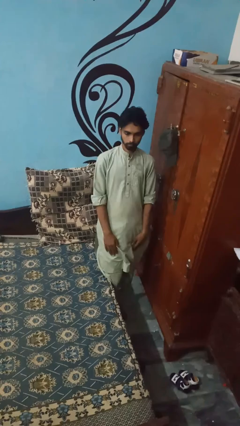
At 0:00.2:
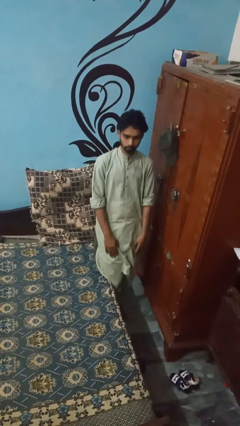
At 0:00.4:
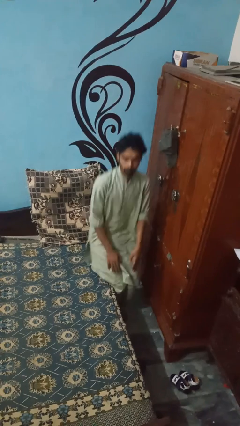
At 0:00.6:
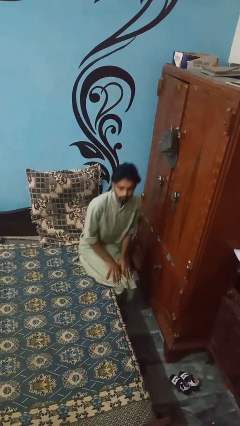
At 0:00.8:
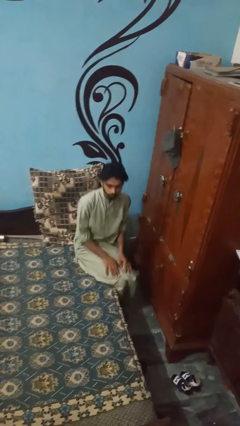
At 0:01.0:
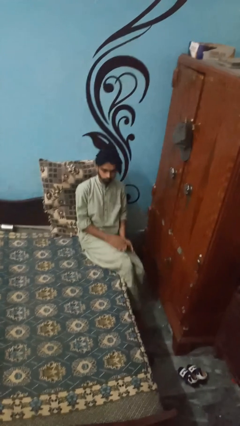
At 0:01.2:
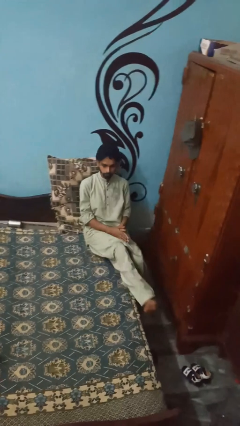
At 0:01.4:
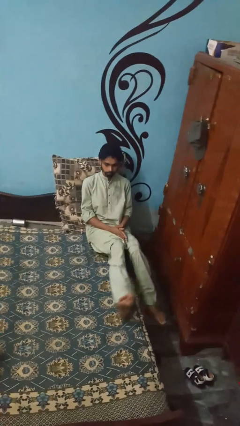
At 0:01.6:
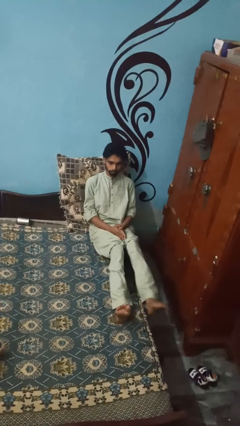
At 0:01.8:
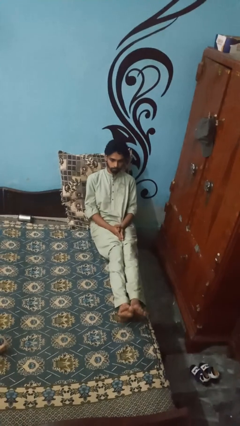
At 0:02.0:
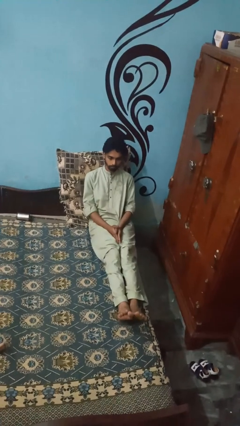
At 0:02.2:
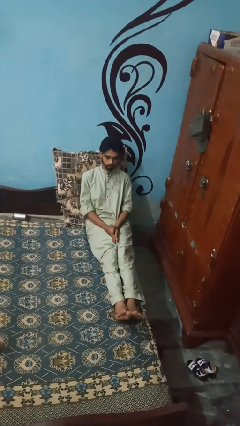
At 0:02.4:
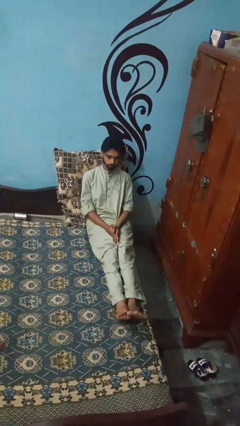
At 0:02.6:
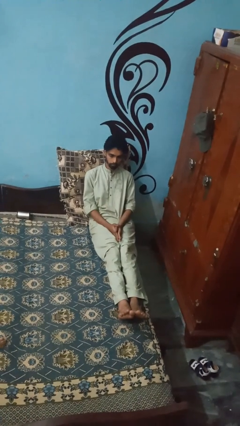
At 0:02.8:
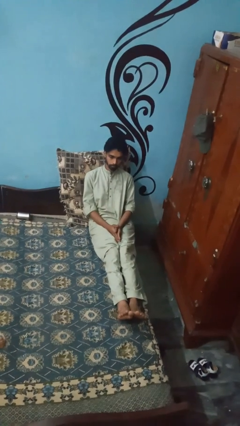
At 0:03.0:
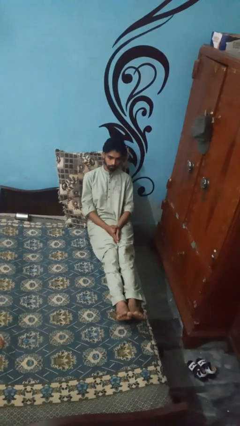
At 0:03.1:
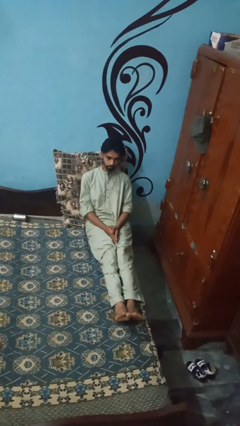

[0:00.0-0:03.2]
person lies down on bed

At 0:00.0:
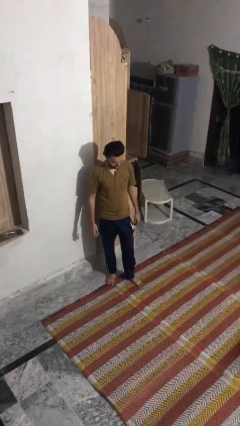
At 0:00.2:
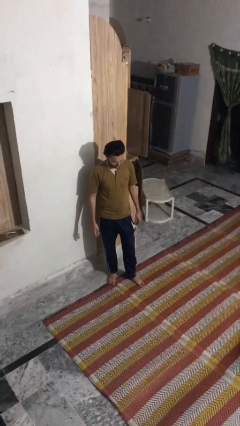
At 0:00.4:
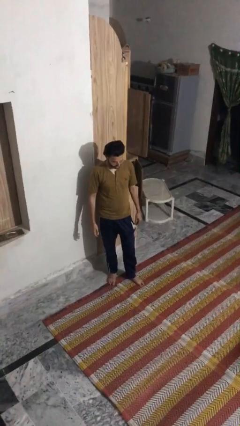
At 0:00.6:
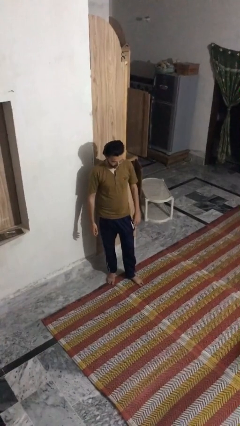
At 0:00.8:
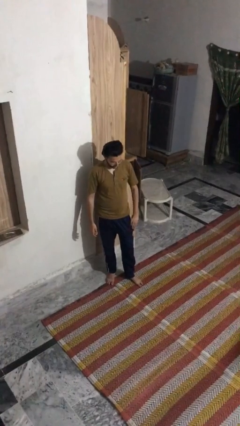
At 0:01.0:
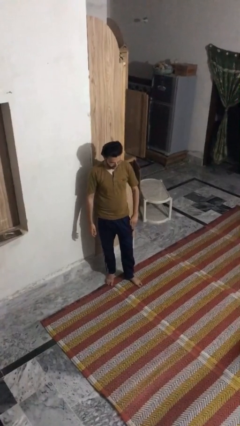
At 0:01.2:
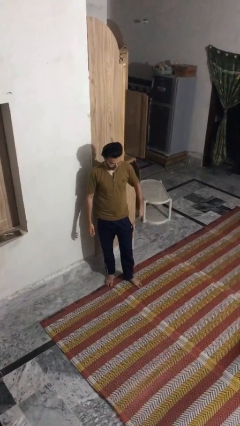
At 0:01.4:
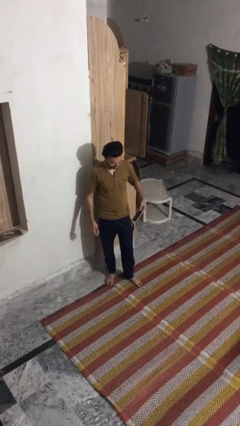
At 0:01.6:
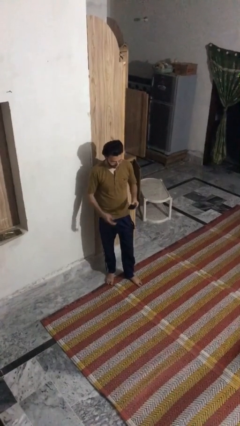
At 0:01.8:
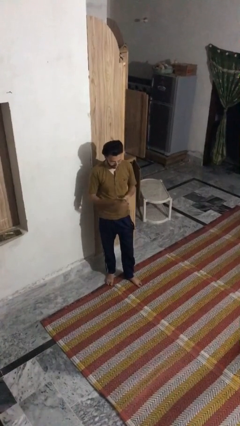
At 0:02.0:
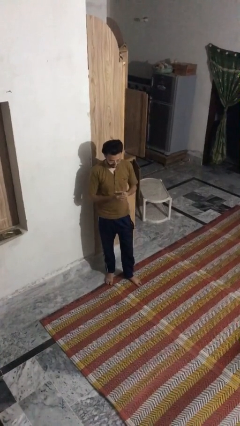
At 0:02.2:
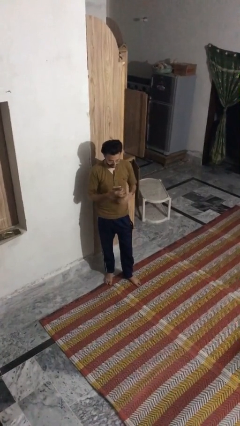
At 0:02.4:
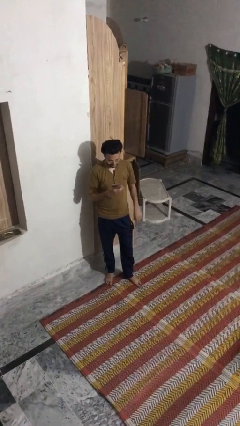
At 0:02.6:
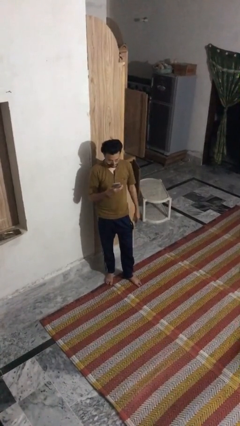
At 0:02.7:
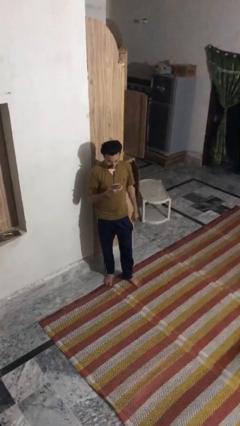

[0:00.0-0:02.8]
person takes phone from pocket

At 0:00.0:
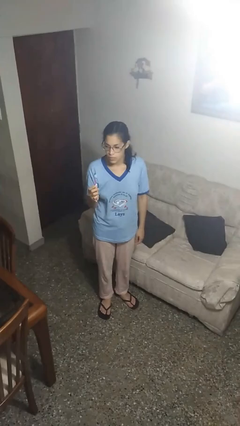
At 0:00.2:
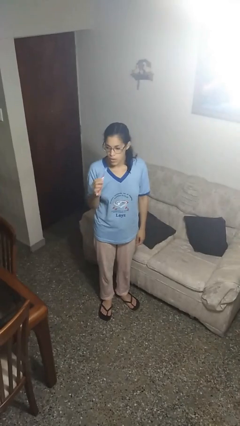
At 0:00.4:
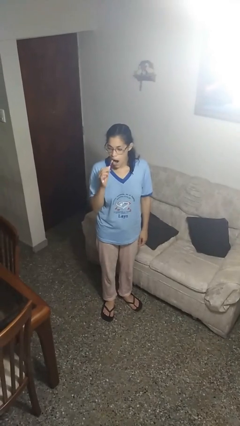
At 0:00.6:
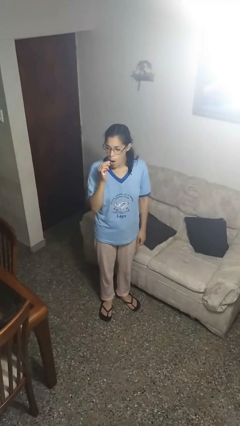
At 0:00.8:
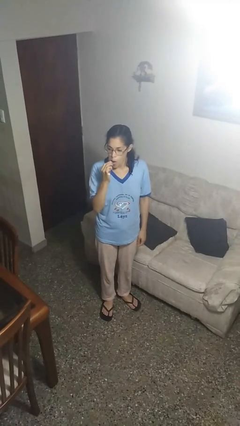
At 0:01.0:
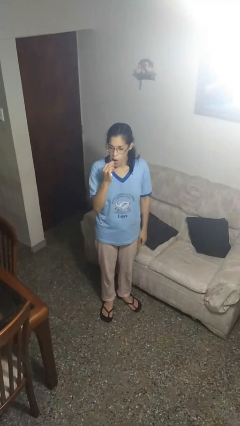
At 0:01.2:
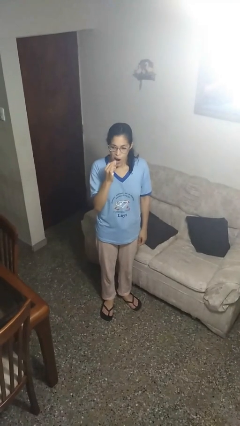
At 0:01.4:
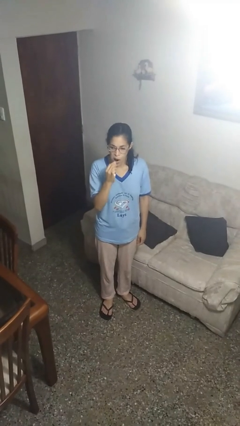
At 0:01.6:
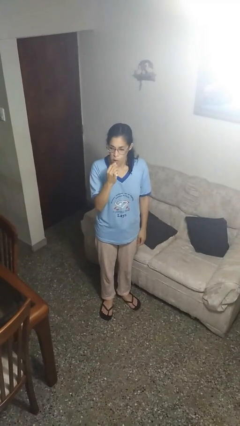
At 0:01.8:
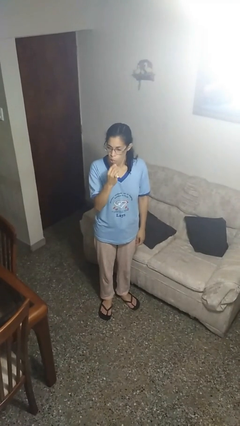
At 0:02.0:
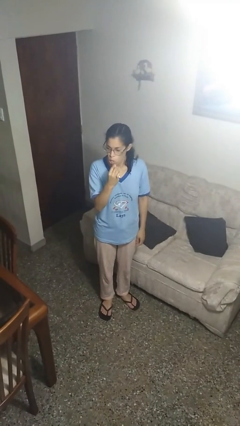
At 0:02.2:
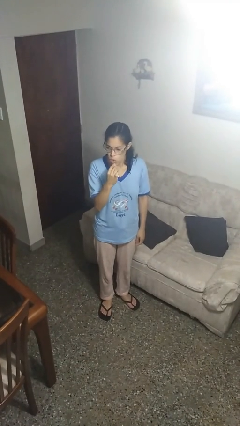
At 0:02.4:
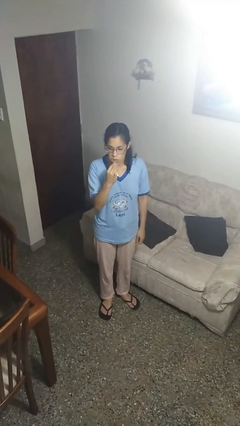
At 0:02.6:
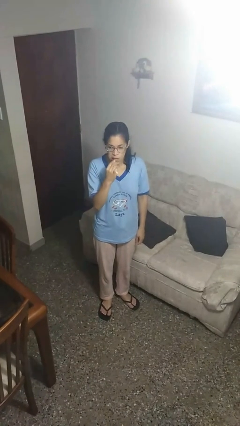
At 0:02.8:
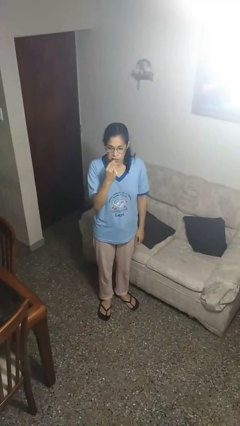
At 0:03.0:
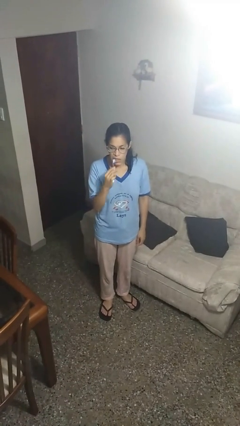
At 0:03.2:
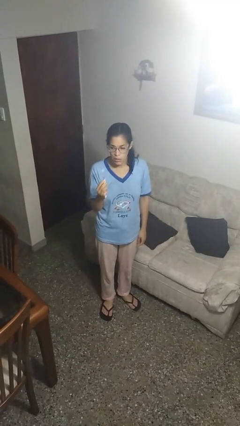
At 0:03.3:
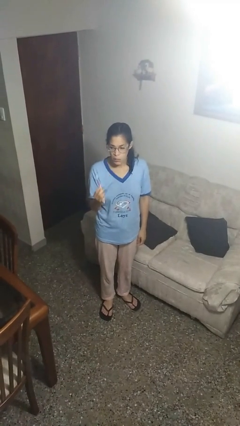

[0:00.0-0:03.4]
person brushes teeth

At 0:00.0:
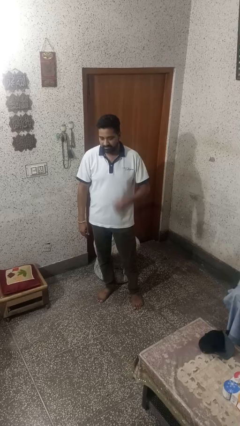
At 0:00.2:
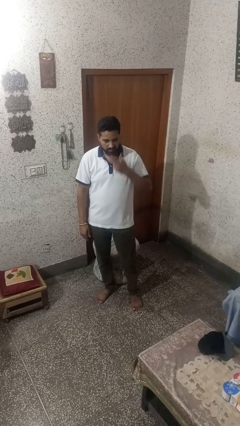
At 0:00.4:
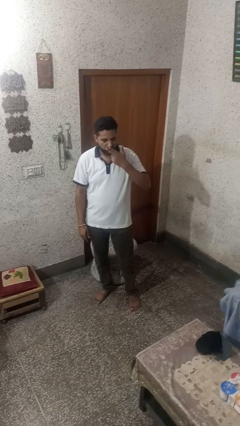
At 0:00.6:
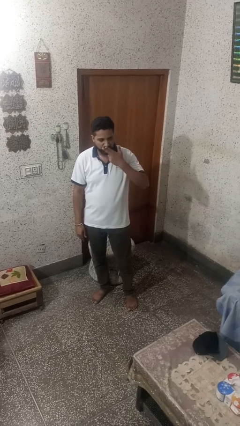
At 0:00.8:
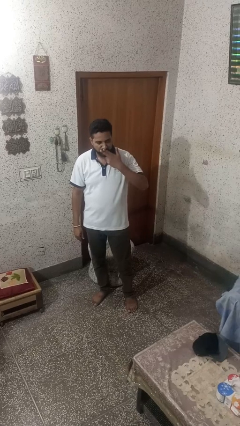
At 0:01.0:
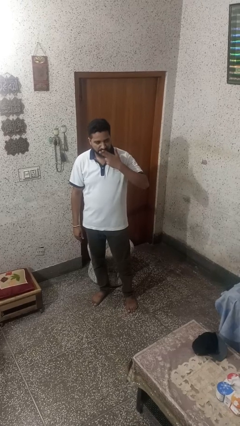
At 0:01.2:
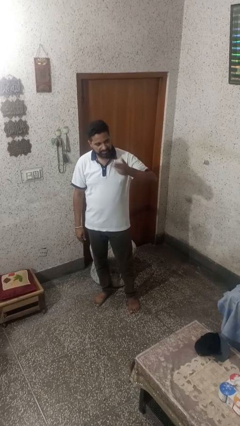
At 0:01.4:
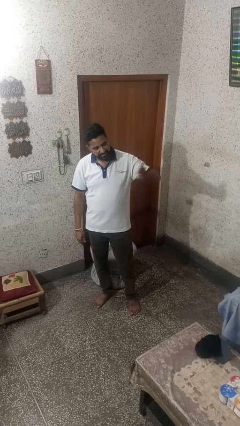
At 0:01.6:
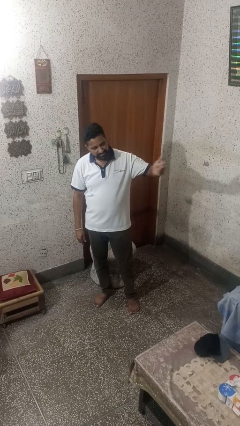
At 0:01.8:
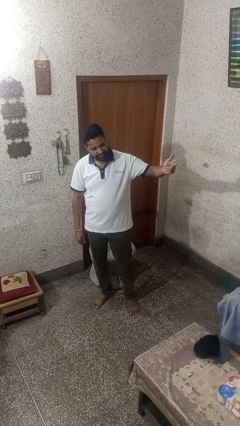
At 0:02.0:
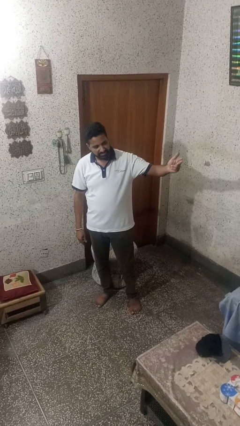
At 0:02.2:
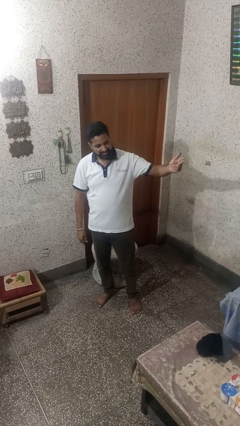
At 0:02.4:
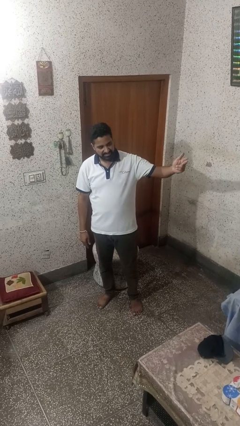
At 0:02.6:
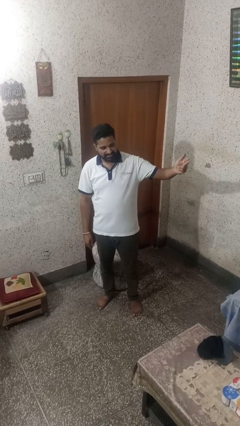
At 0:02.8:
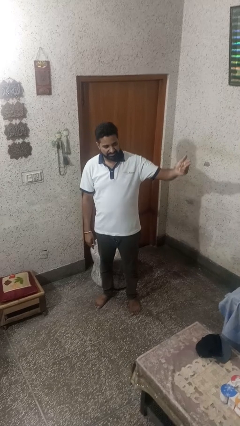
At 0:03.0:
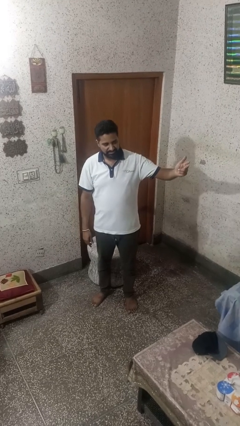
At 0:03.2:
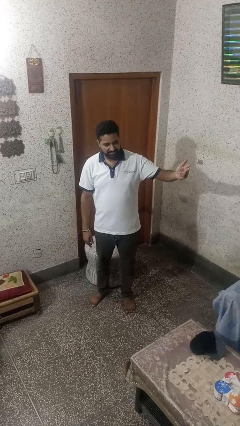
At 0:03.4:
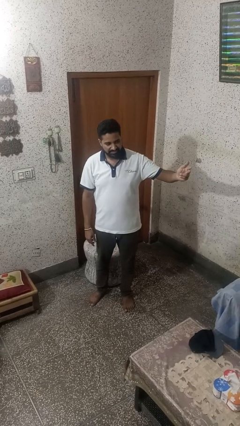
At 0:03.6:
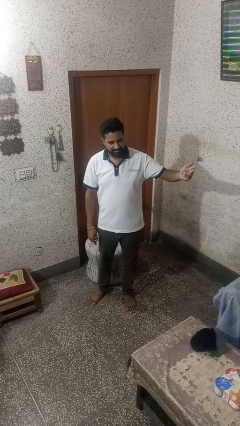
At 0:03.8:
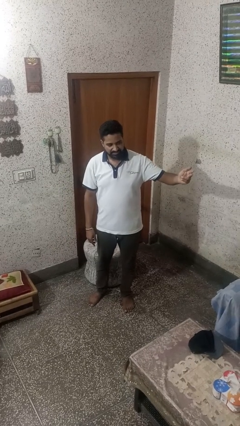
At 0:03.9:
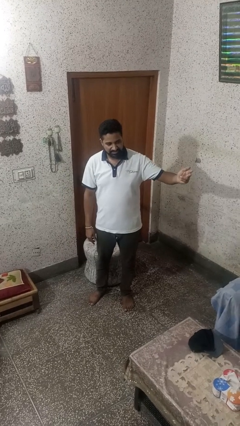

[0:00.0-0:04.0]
person gestures blow kiss

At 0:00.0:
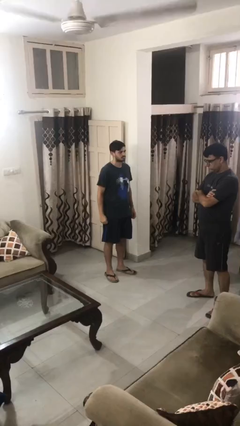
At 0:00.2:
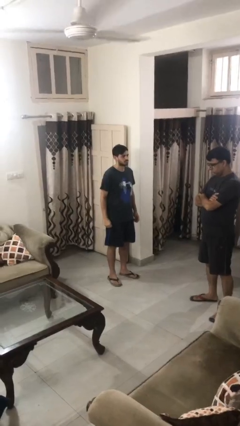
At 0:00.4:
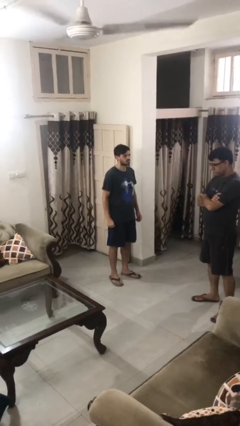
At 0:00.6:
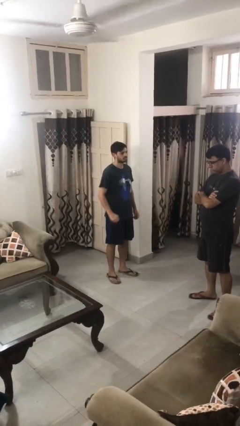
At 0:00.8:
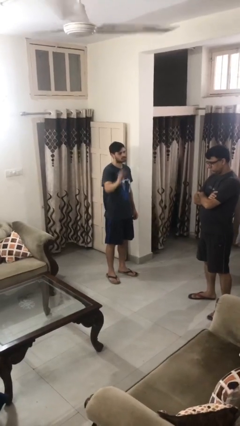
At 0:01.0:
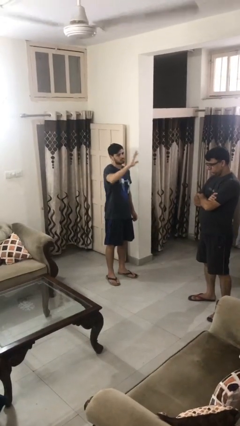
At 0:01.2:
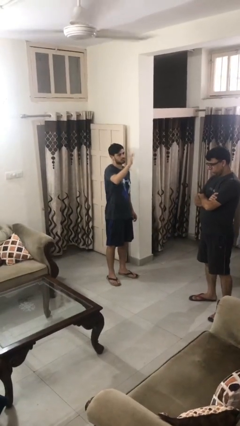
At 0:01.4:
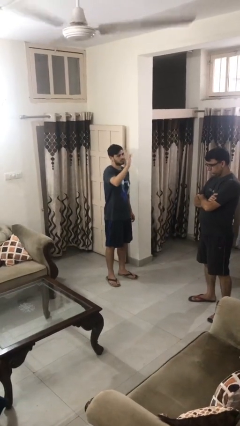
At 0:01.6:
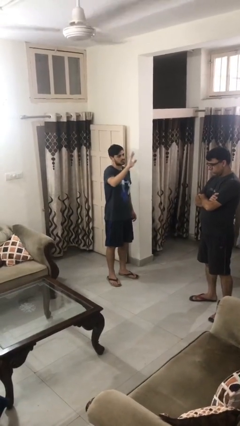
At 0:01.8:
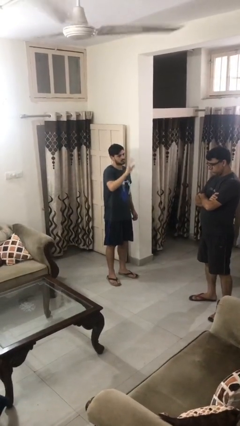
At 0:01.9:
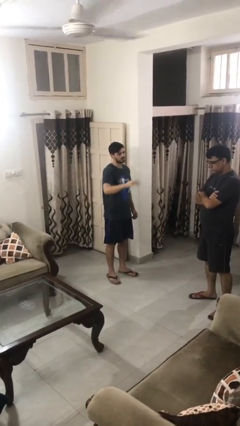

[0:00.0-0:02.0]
person waves at person

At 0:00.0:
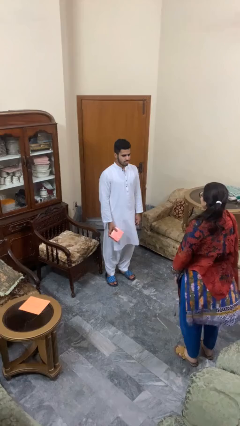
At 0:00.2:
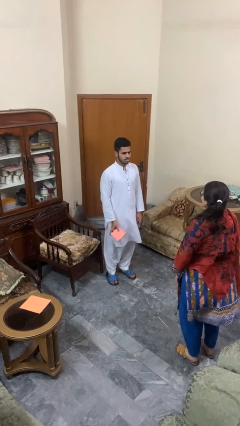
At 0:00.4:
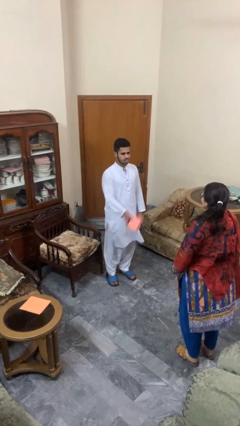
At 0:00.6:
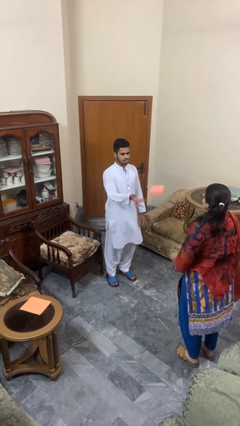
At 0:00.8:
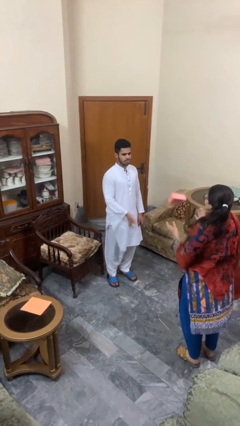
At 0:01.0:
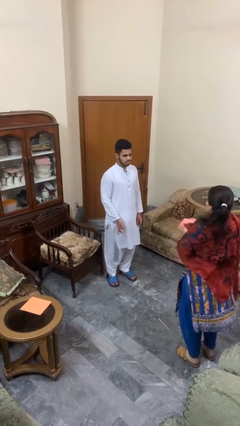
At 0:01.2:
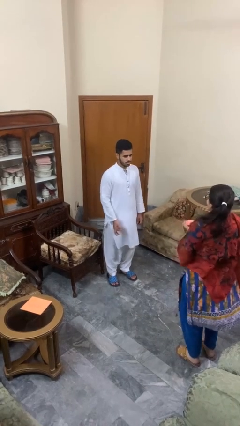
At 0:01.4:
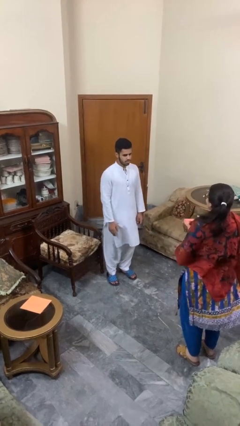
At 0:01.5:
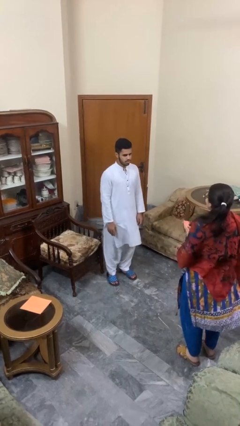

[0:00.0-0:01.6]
person throws object to person

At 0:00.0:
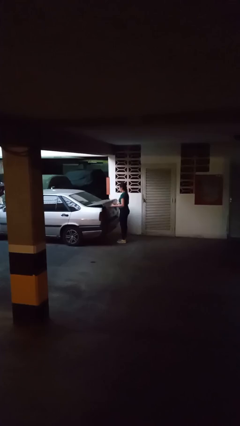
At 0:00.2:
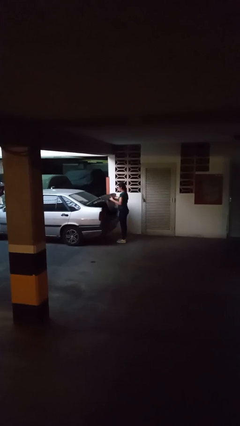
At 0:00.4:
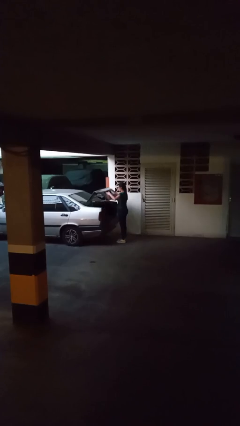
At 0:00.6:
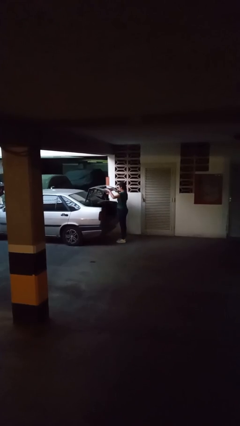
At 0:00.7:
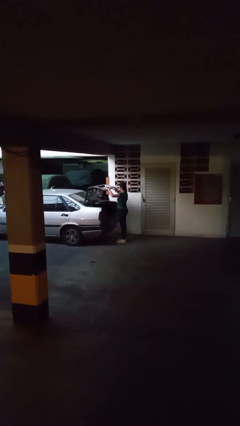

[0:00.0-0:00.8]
person opens car trunk
